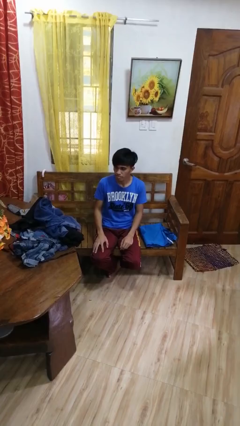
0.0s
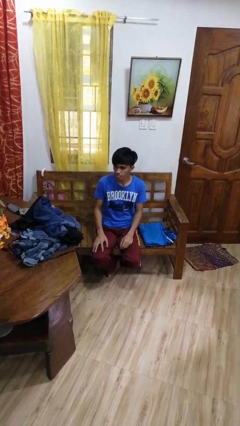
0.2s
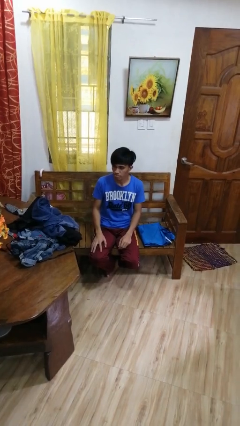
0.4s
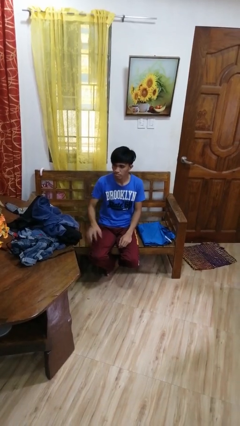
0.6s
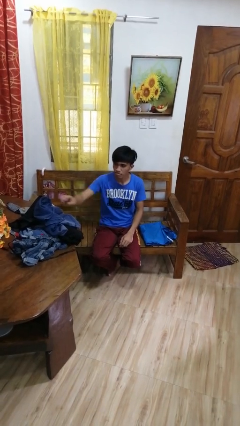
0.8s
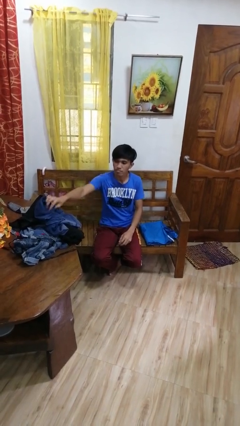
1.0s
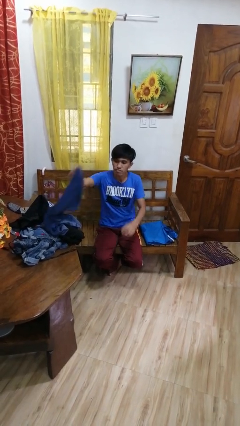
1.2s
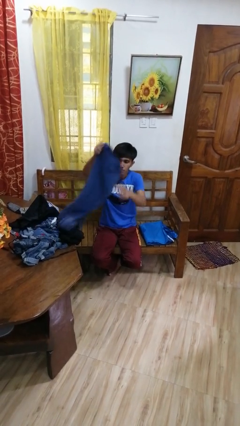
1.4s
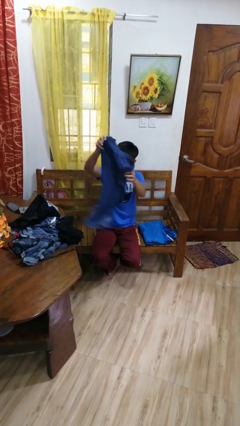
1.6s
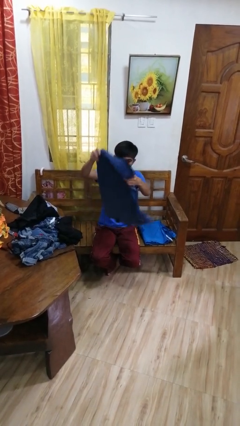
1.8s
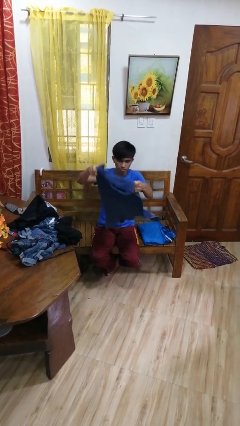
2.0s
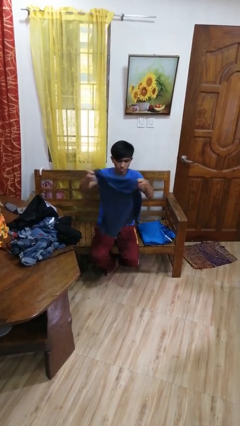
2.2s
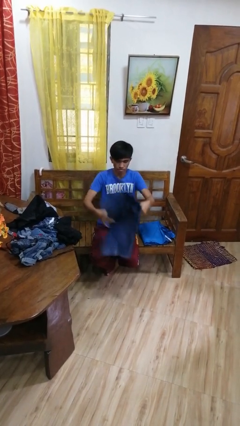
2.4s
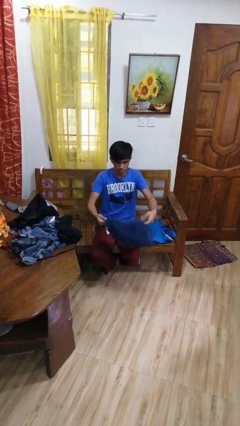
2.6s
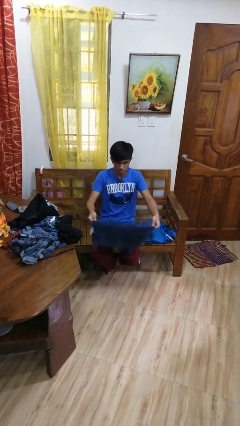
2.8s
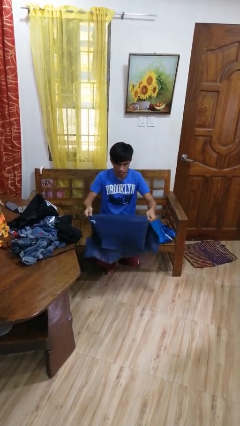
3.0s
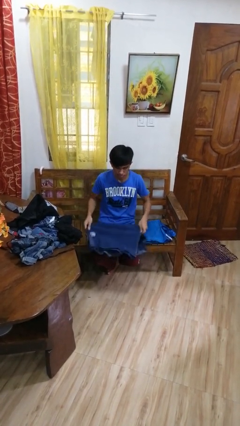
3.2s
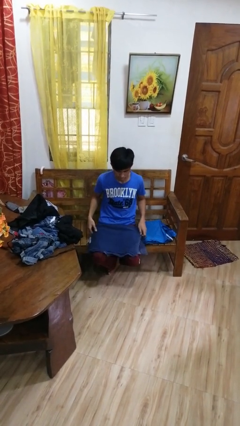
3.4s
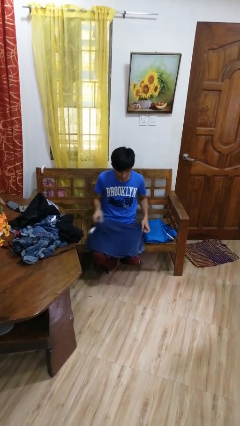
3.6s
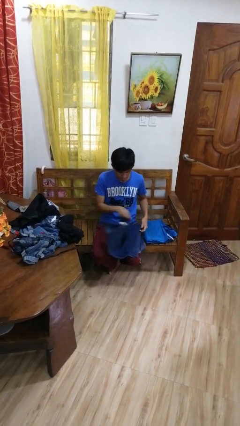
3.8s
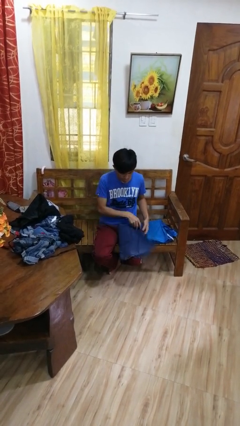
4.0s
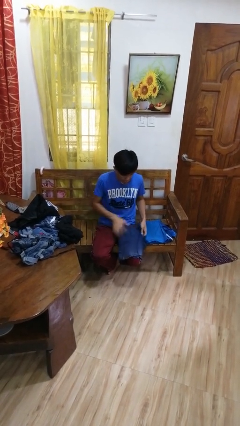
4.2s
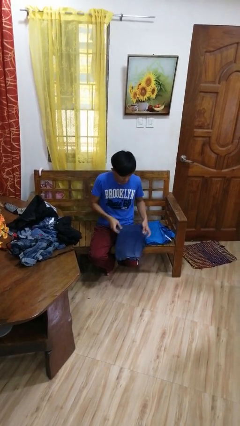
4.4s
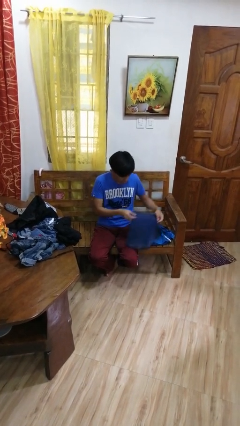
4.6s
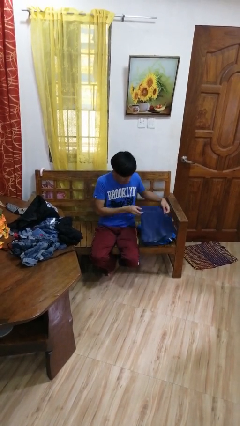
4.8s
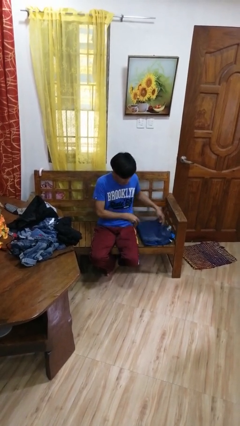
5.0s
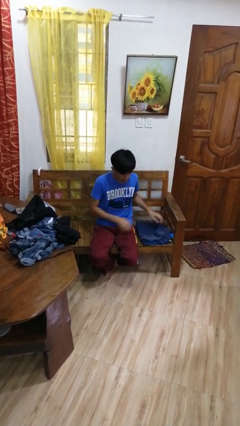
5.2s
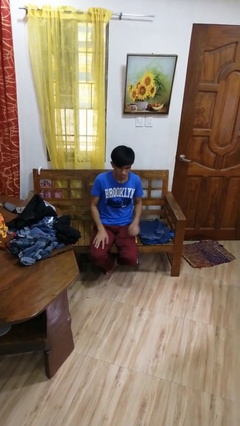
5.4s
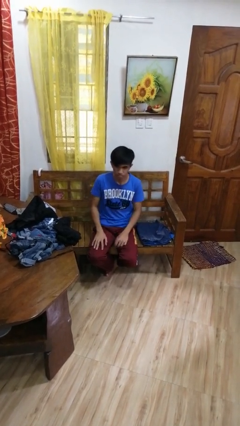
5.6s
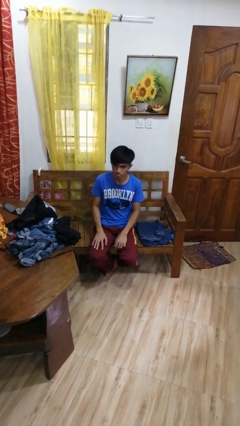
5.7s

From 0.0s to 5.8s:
person folds shirt

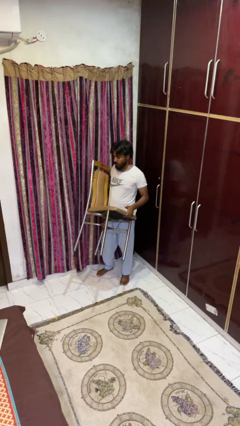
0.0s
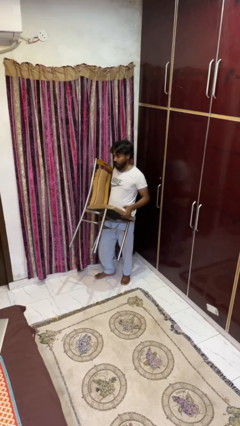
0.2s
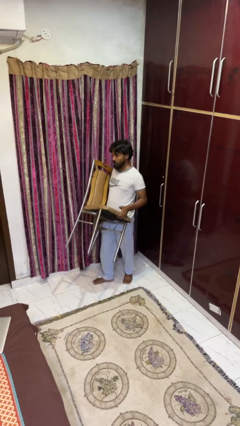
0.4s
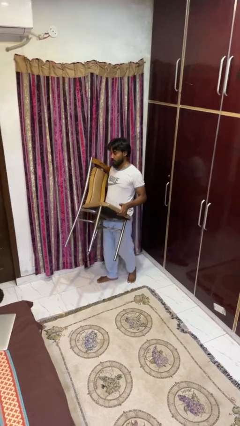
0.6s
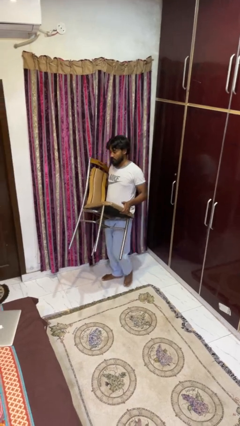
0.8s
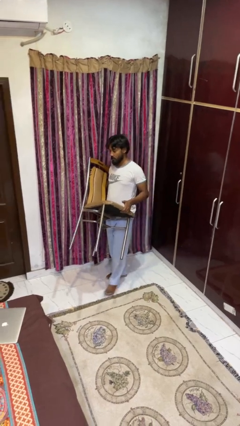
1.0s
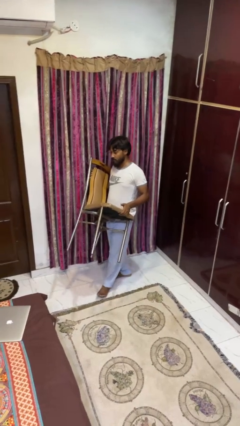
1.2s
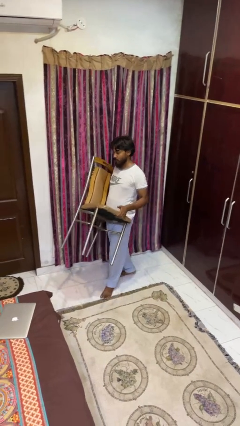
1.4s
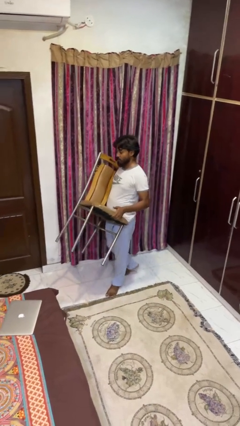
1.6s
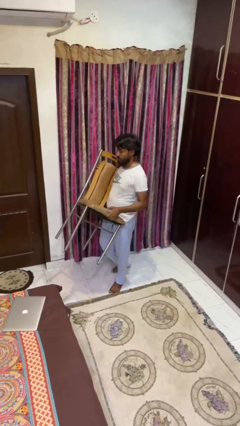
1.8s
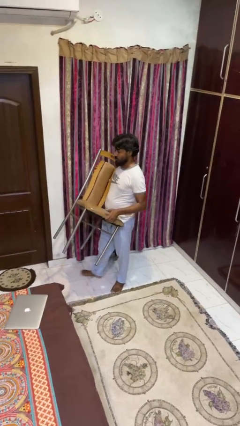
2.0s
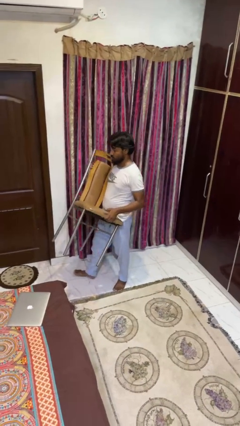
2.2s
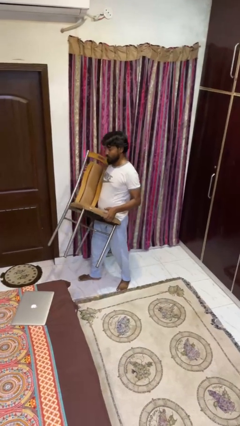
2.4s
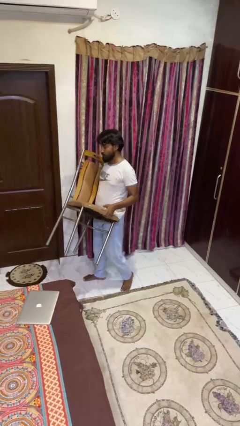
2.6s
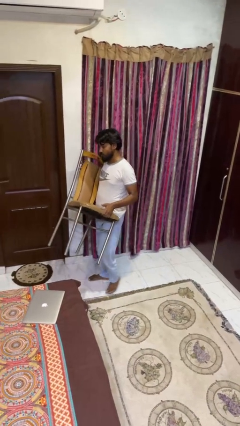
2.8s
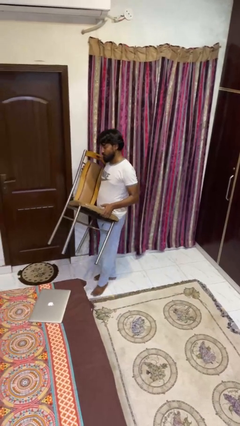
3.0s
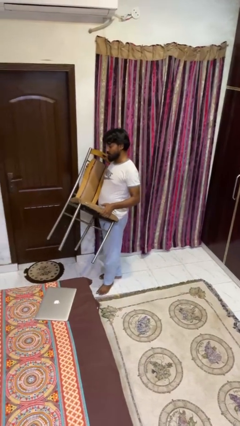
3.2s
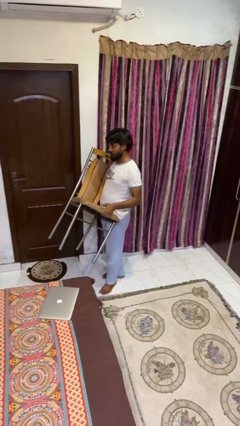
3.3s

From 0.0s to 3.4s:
person carries furniture

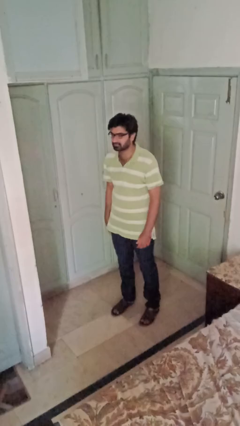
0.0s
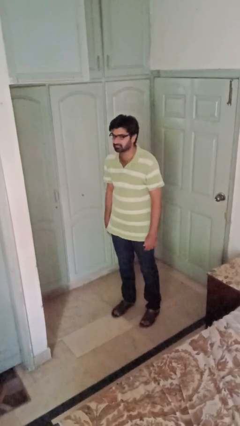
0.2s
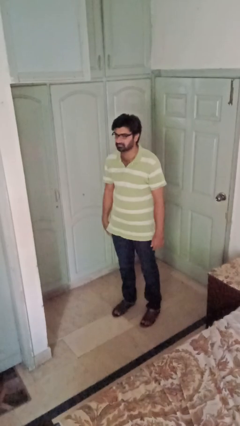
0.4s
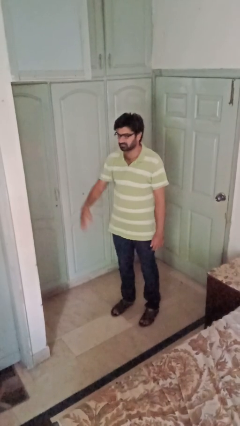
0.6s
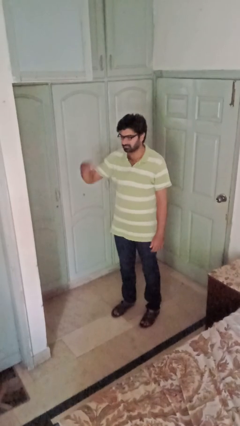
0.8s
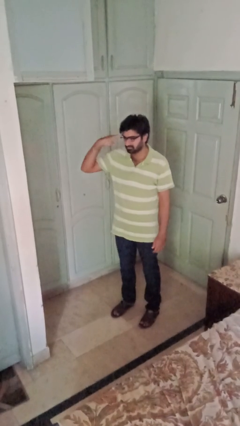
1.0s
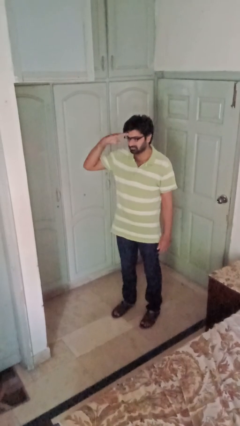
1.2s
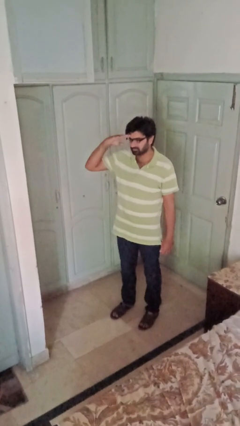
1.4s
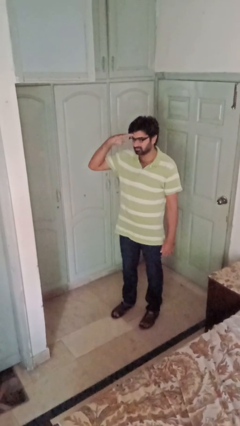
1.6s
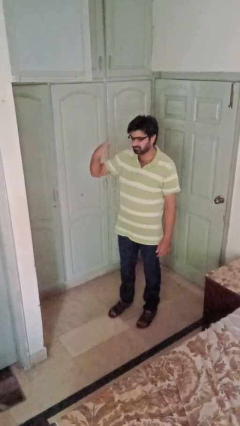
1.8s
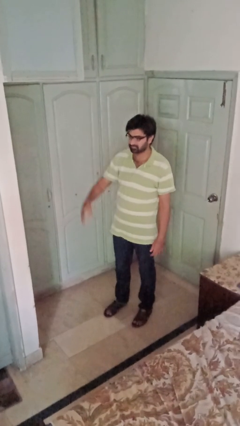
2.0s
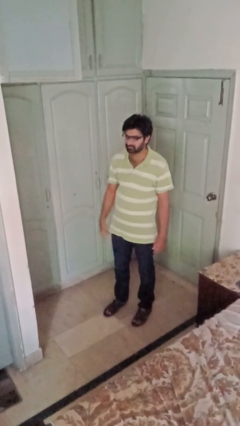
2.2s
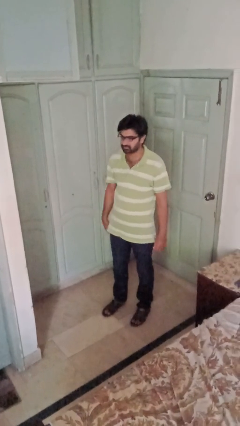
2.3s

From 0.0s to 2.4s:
person salutes

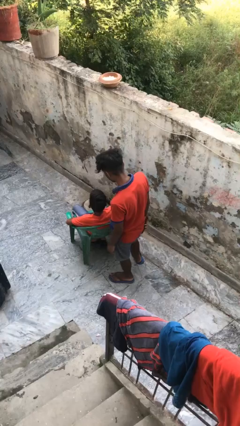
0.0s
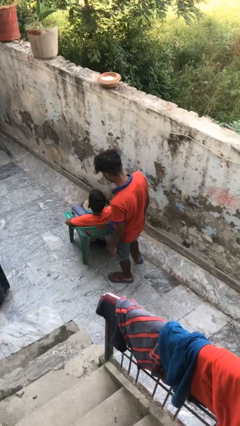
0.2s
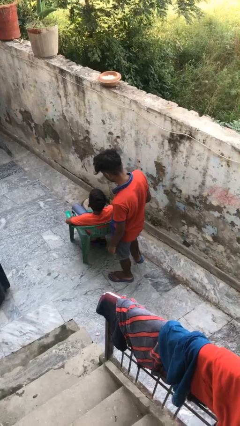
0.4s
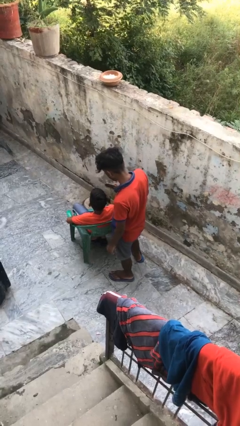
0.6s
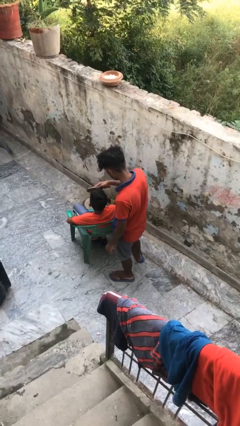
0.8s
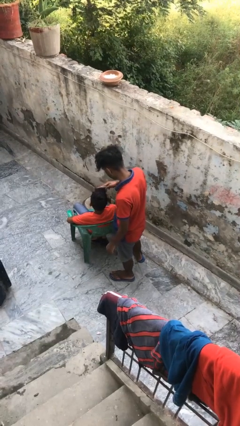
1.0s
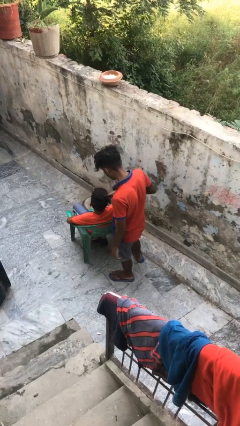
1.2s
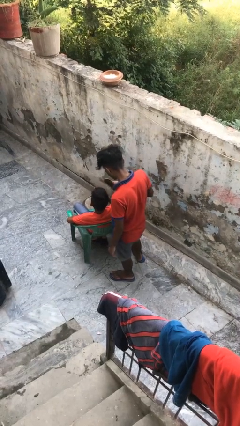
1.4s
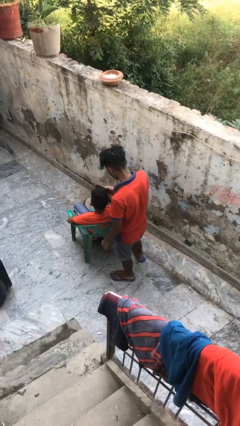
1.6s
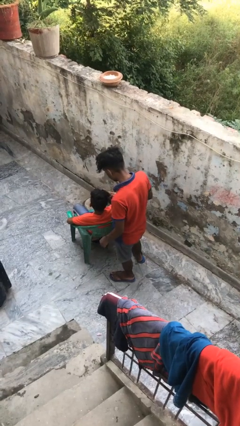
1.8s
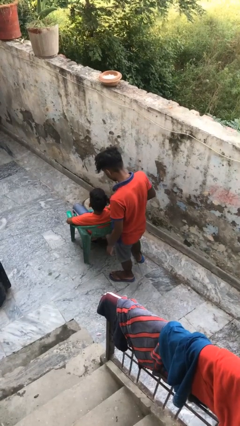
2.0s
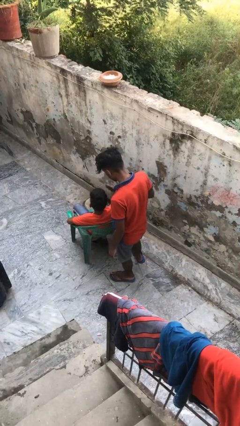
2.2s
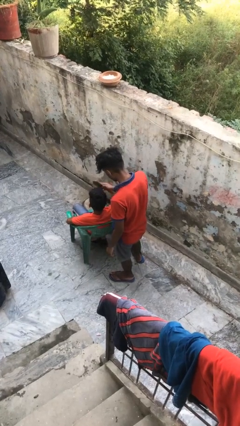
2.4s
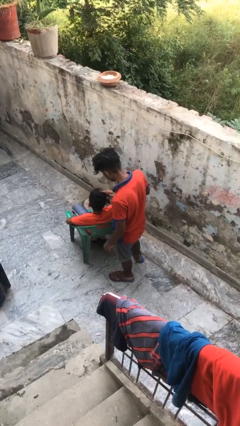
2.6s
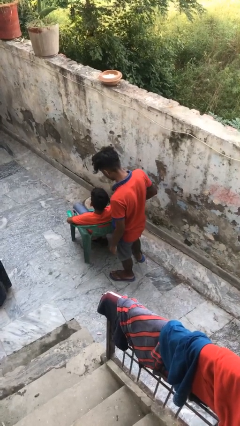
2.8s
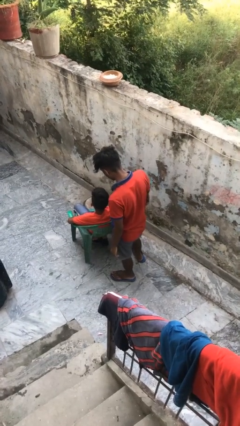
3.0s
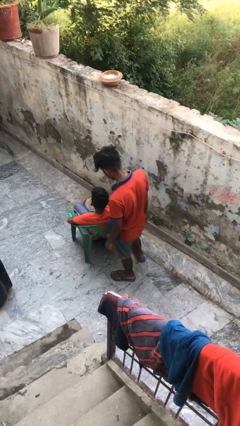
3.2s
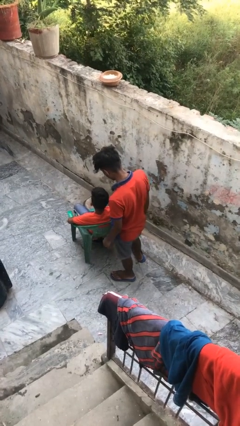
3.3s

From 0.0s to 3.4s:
person brushes hair of person

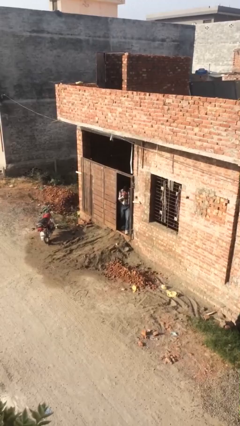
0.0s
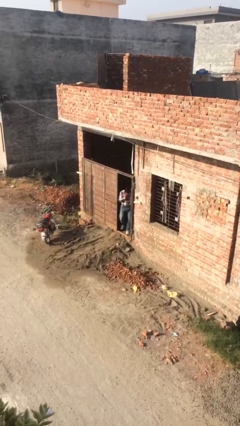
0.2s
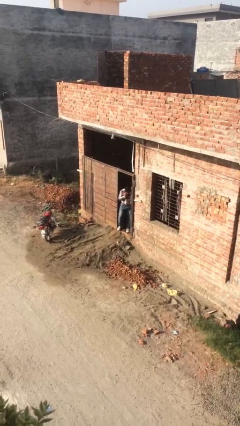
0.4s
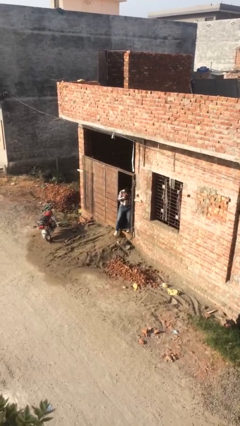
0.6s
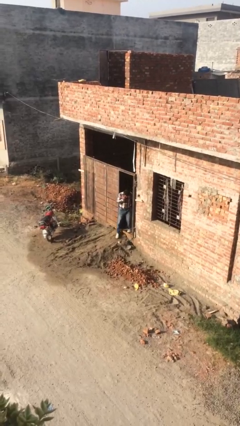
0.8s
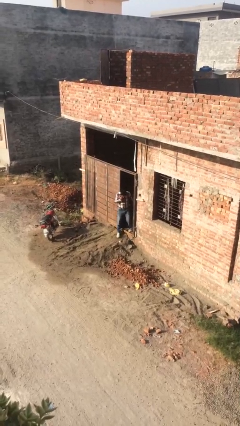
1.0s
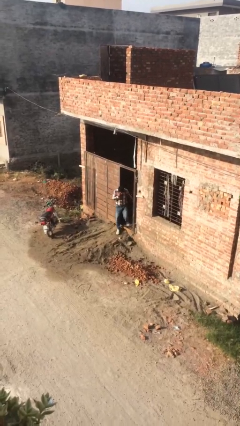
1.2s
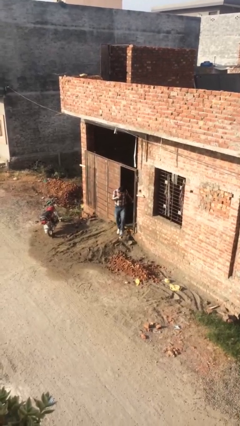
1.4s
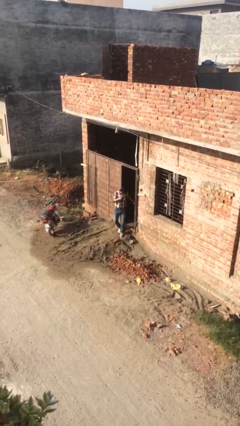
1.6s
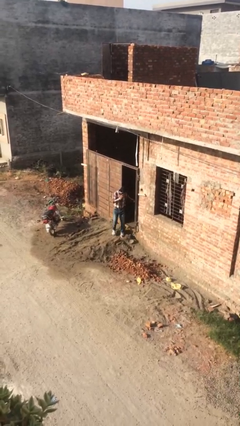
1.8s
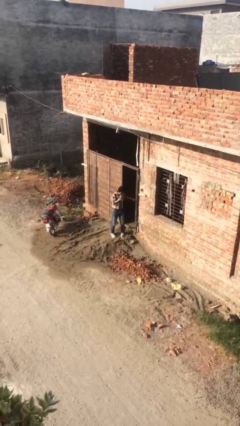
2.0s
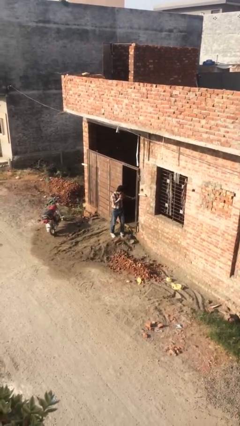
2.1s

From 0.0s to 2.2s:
person enters scene through structure

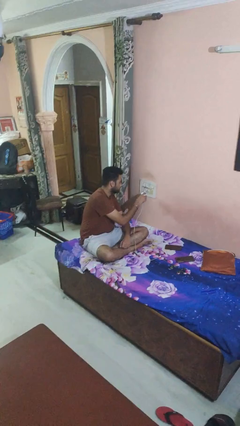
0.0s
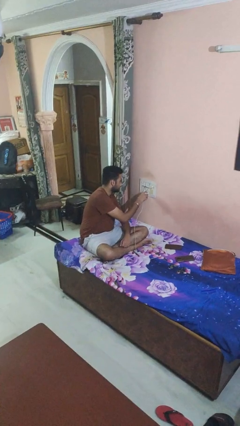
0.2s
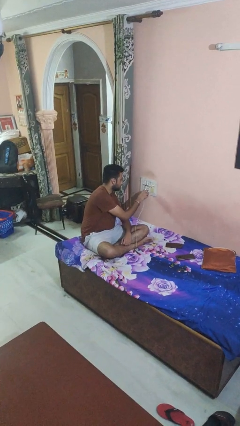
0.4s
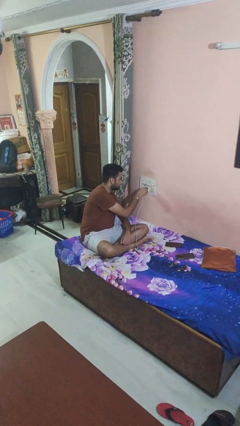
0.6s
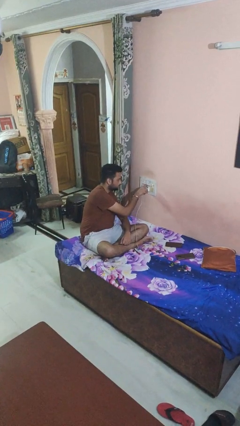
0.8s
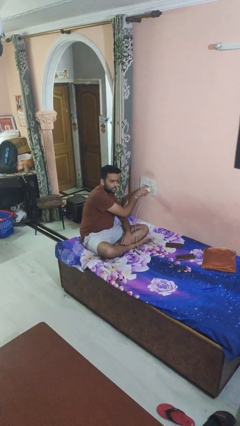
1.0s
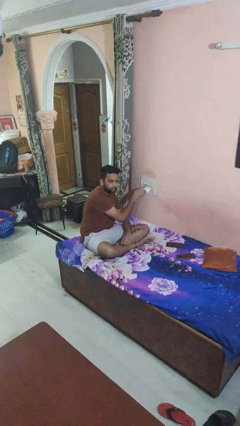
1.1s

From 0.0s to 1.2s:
person plugs into electrical socket
